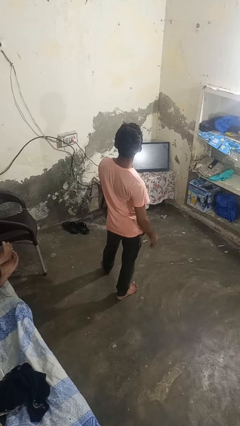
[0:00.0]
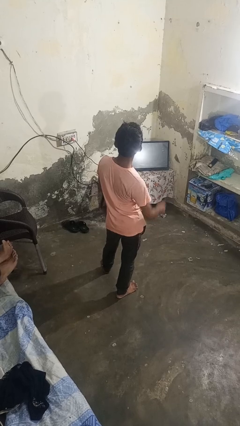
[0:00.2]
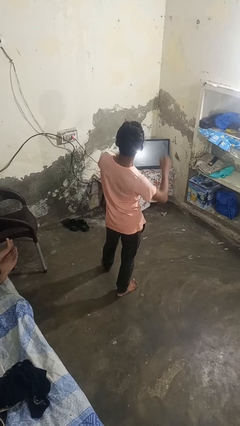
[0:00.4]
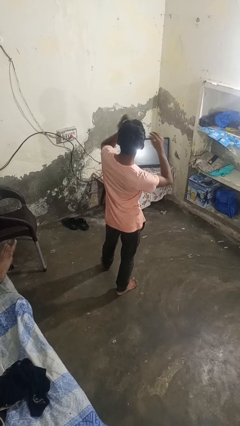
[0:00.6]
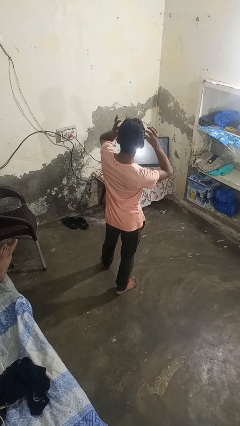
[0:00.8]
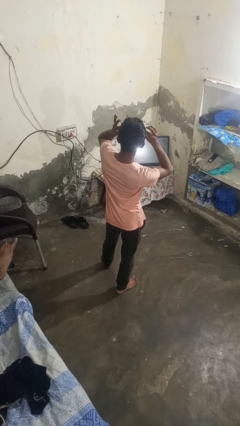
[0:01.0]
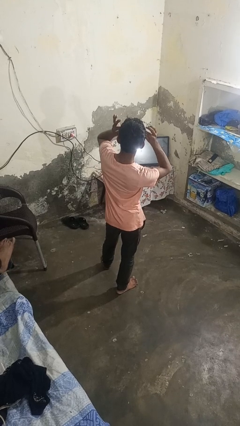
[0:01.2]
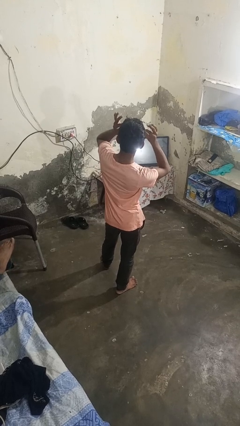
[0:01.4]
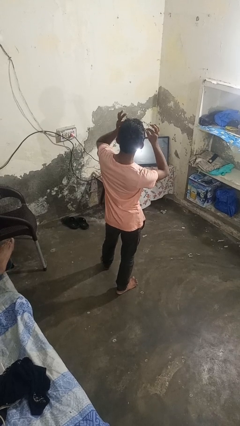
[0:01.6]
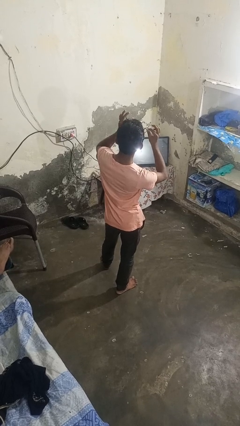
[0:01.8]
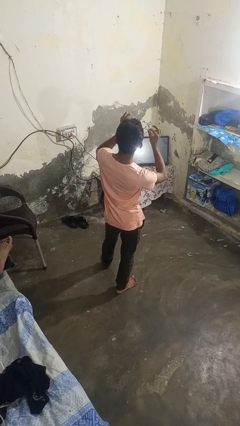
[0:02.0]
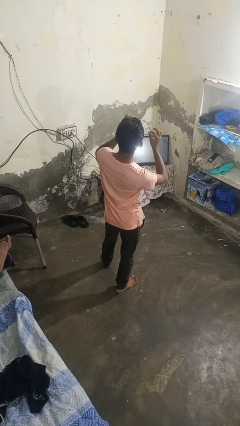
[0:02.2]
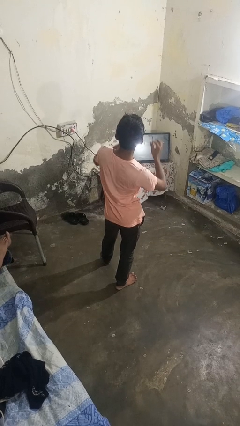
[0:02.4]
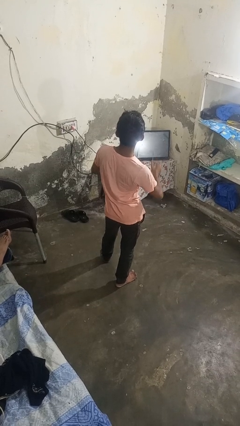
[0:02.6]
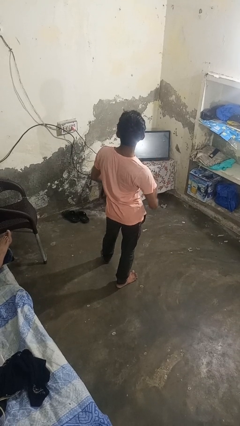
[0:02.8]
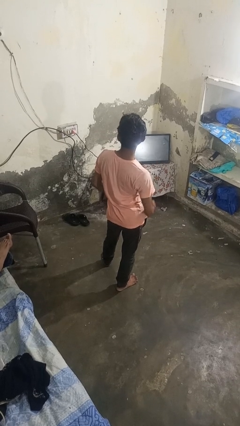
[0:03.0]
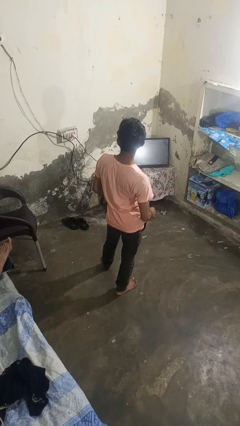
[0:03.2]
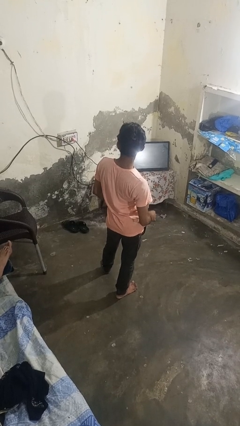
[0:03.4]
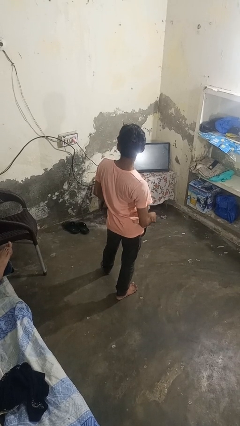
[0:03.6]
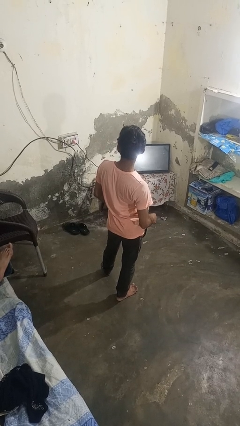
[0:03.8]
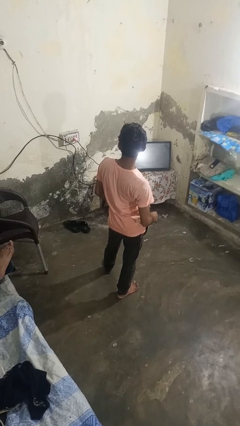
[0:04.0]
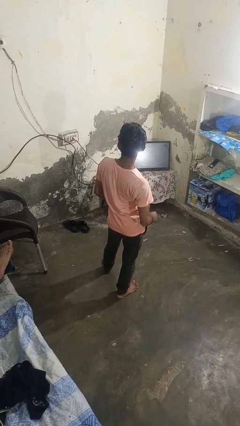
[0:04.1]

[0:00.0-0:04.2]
person takes off glasses

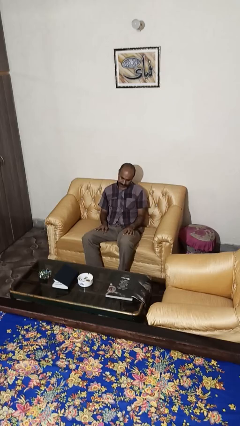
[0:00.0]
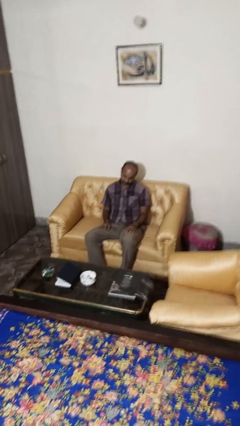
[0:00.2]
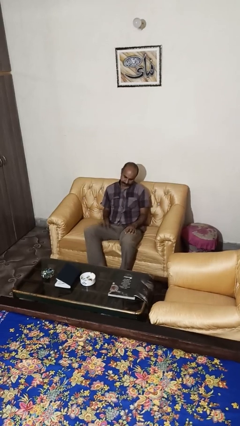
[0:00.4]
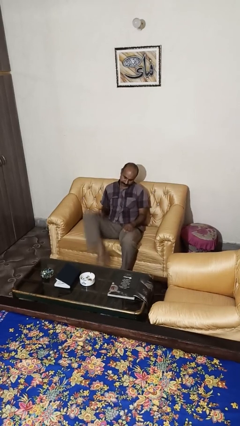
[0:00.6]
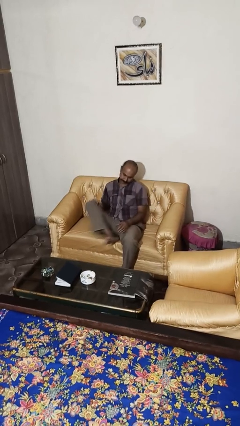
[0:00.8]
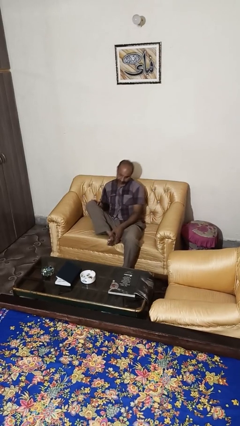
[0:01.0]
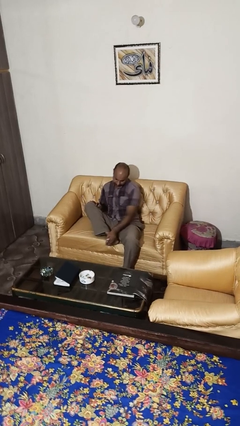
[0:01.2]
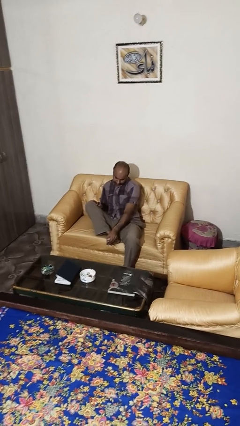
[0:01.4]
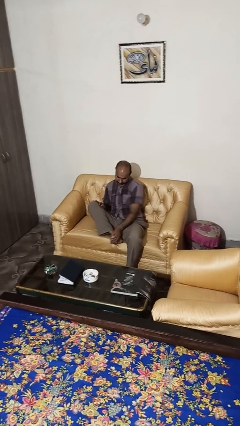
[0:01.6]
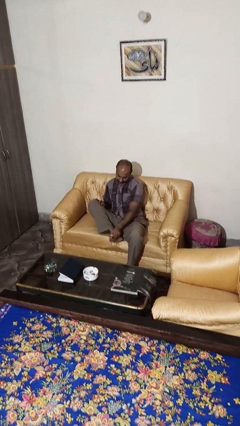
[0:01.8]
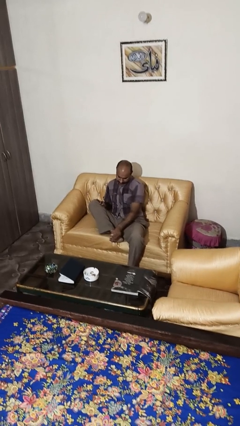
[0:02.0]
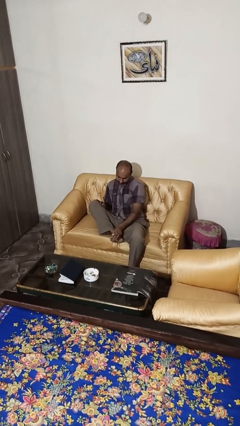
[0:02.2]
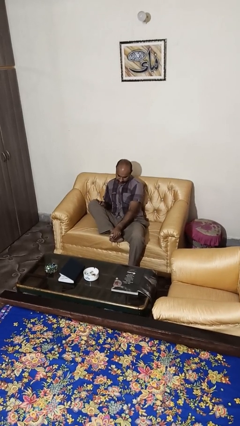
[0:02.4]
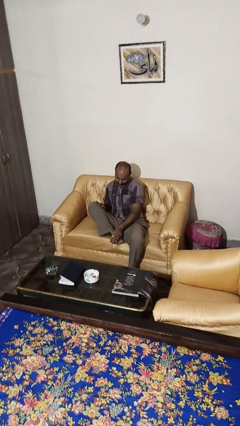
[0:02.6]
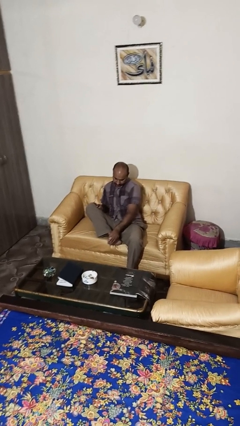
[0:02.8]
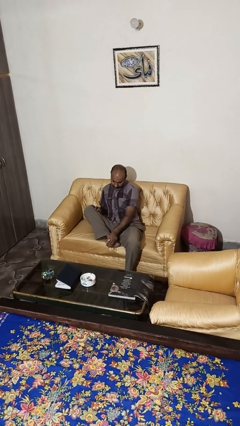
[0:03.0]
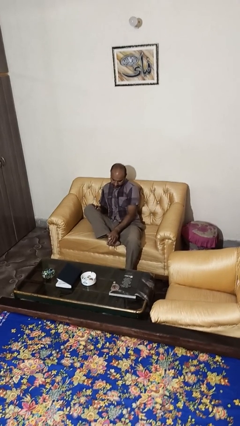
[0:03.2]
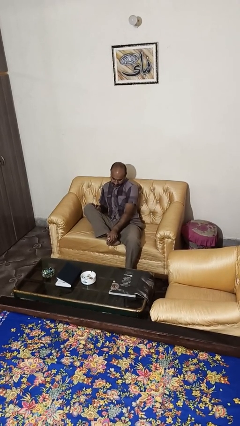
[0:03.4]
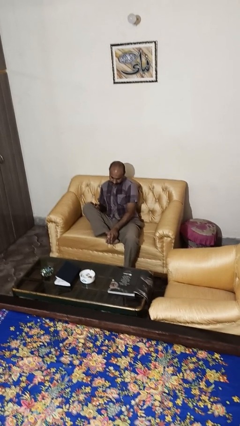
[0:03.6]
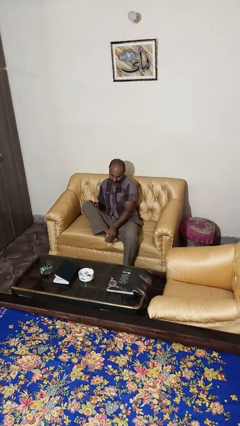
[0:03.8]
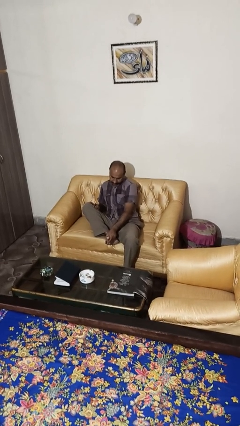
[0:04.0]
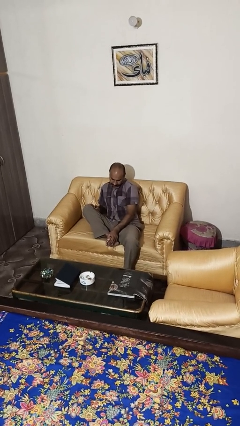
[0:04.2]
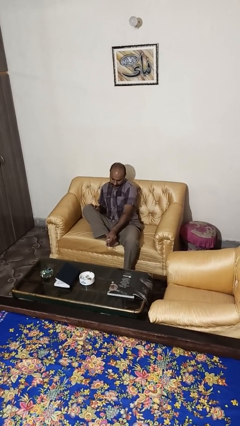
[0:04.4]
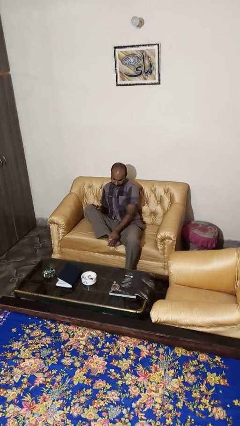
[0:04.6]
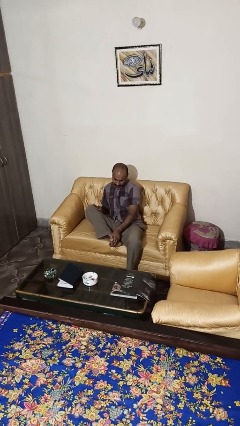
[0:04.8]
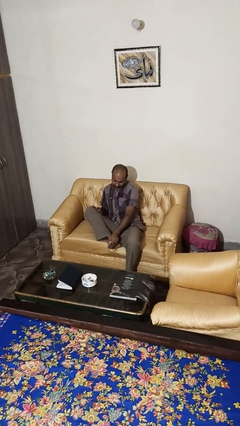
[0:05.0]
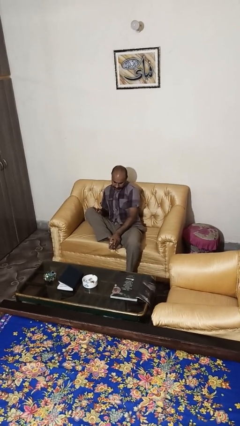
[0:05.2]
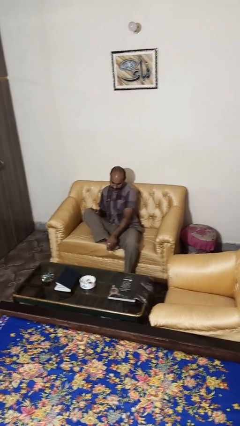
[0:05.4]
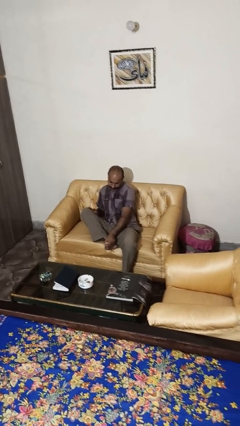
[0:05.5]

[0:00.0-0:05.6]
person rubs foot

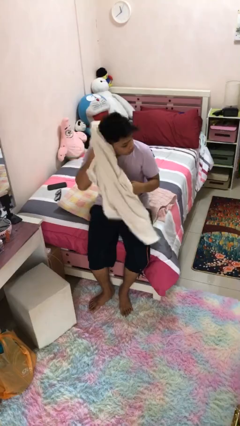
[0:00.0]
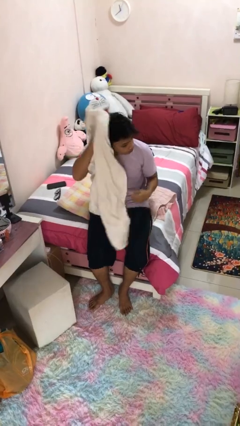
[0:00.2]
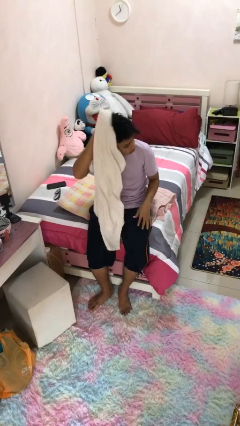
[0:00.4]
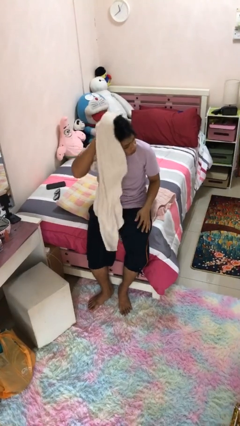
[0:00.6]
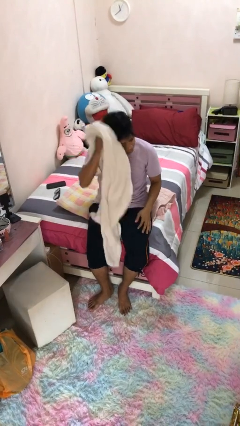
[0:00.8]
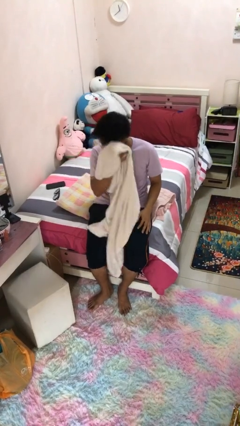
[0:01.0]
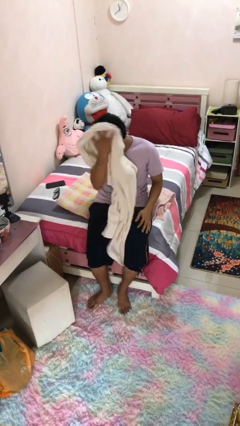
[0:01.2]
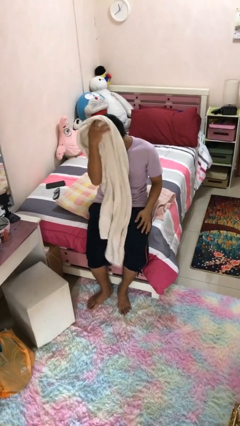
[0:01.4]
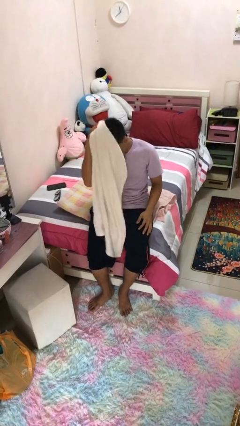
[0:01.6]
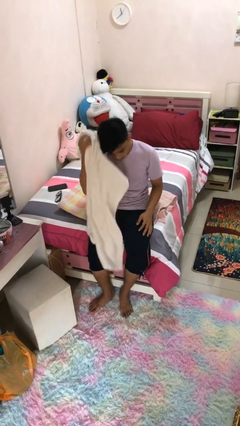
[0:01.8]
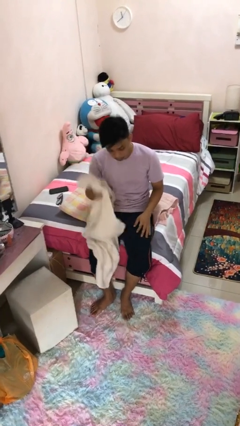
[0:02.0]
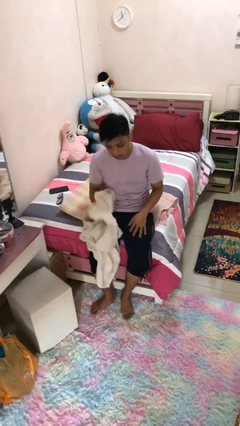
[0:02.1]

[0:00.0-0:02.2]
person dries hair with towel

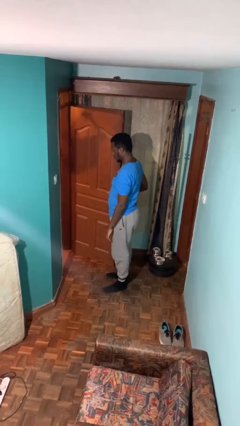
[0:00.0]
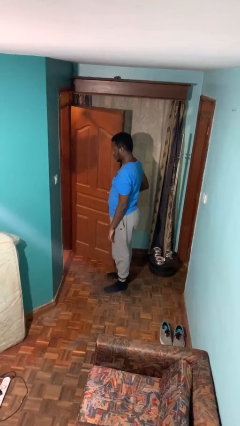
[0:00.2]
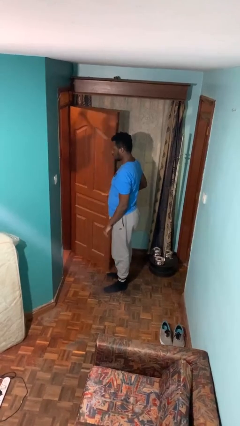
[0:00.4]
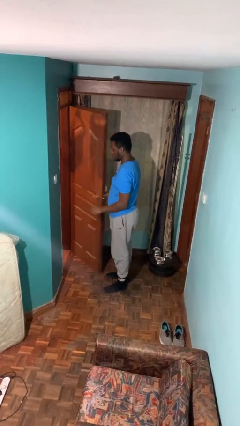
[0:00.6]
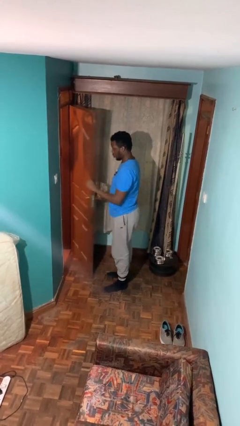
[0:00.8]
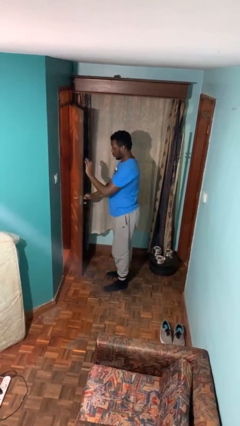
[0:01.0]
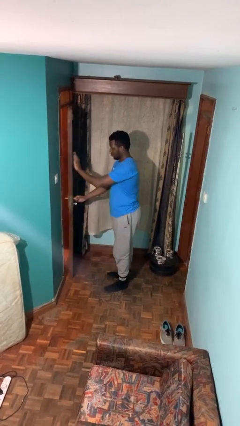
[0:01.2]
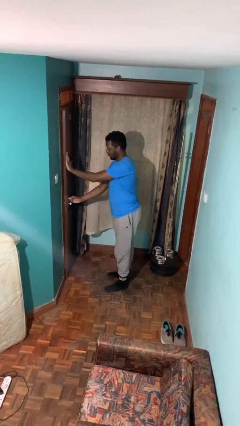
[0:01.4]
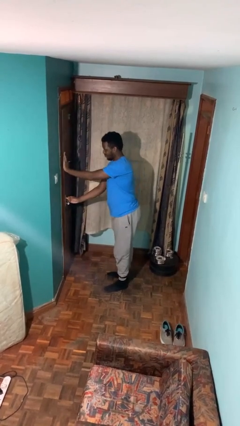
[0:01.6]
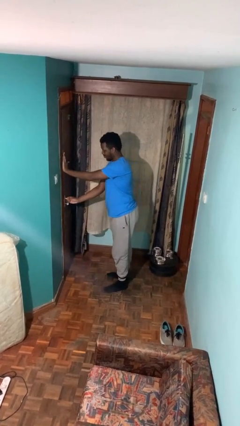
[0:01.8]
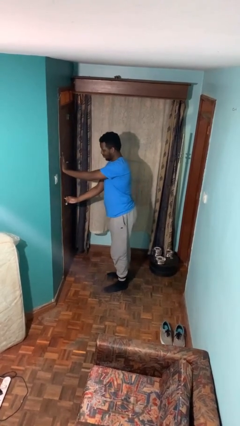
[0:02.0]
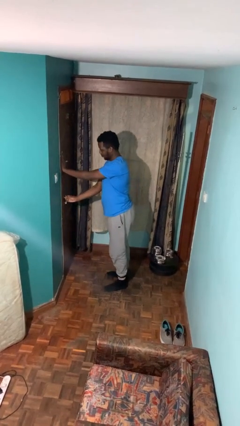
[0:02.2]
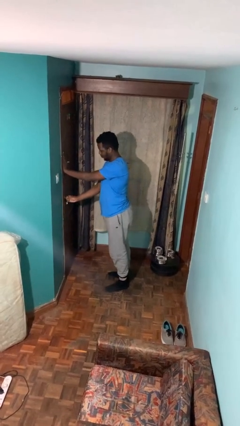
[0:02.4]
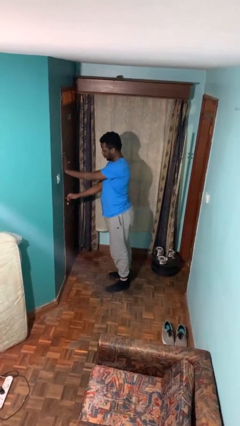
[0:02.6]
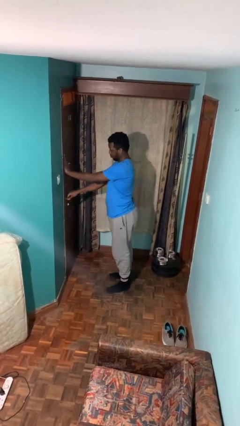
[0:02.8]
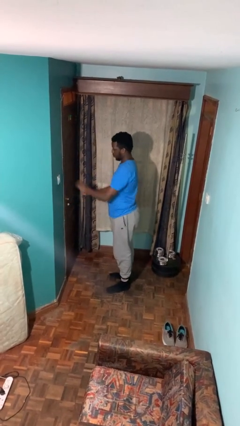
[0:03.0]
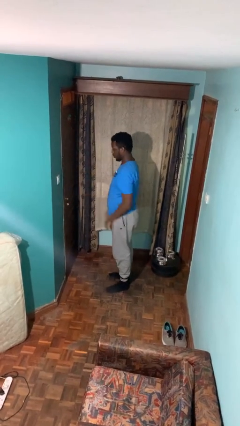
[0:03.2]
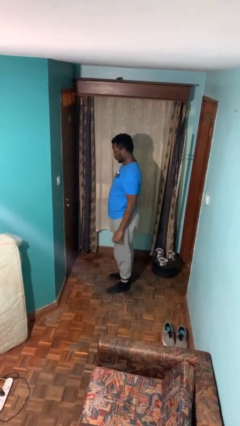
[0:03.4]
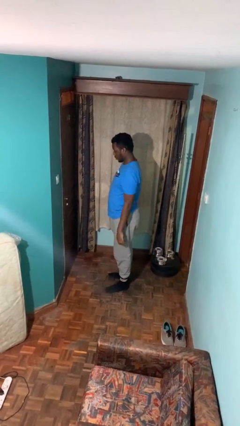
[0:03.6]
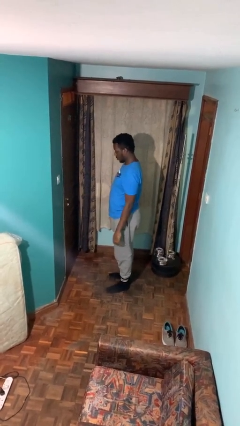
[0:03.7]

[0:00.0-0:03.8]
person closes facility door

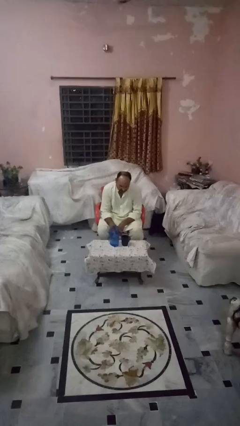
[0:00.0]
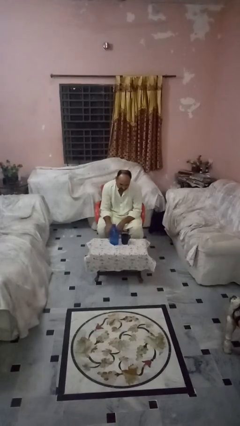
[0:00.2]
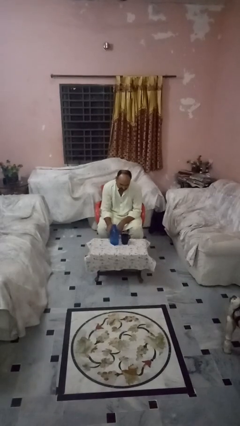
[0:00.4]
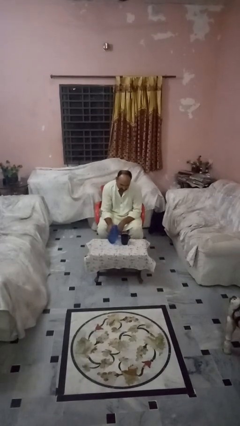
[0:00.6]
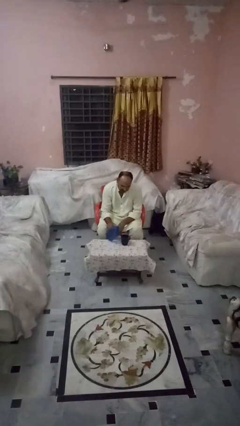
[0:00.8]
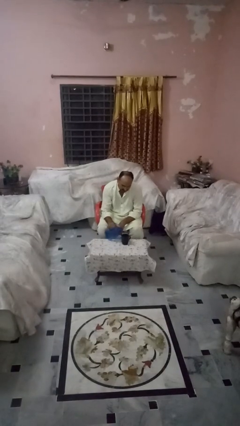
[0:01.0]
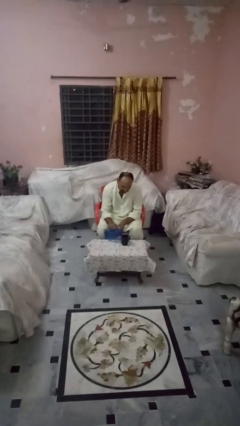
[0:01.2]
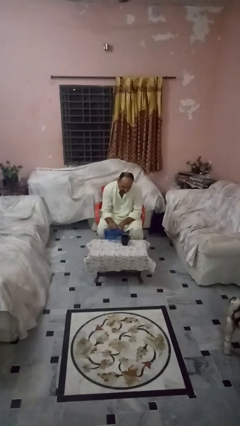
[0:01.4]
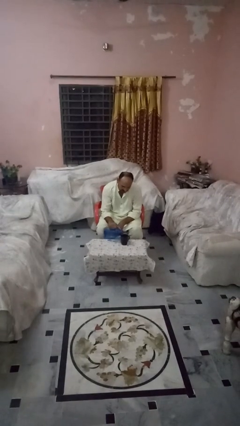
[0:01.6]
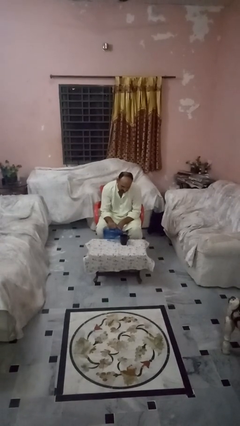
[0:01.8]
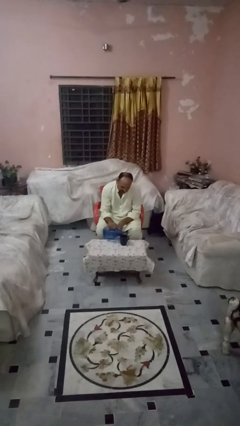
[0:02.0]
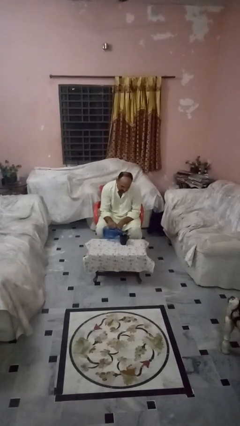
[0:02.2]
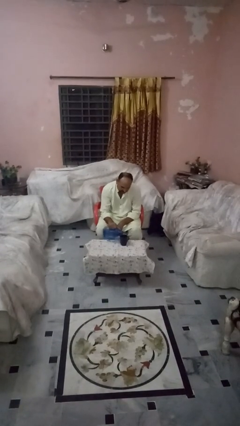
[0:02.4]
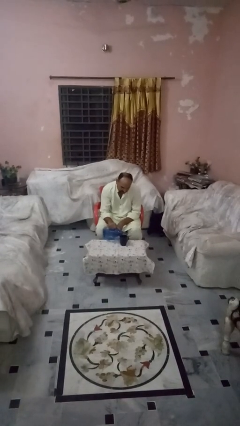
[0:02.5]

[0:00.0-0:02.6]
person pours liquid into cup
